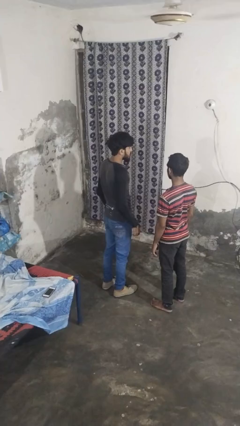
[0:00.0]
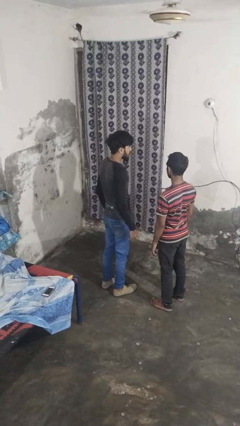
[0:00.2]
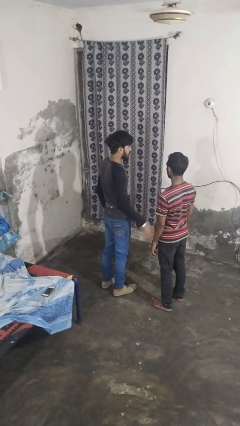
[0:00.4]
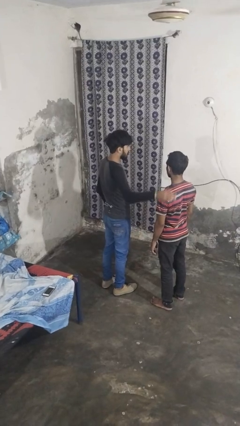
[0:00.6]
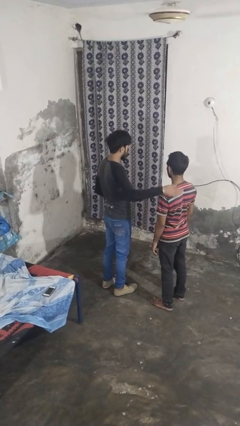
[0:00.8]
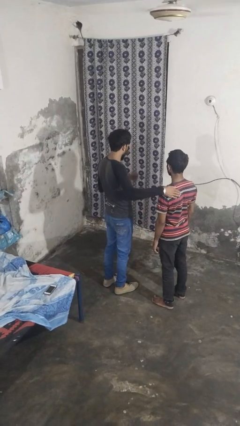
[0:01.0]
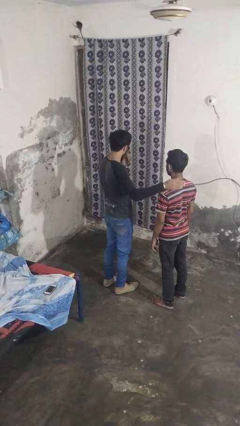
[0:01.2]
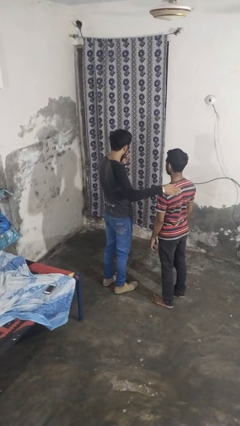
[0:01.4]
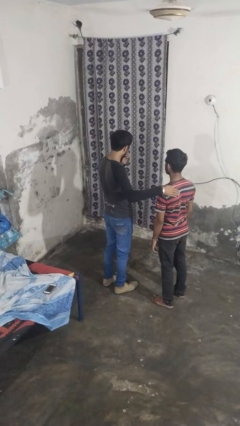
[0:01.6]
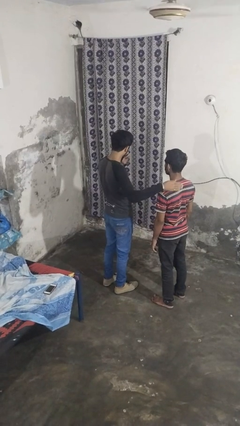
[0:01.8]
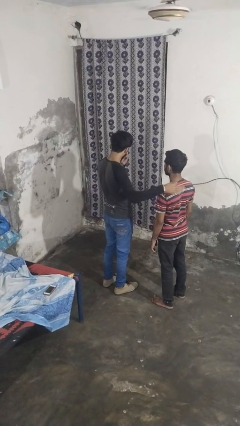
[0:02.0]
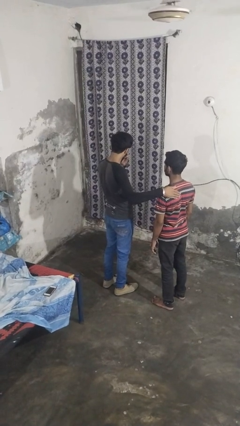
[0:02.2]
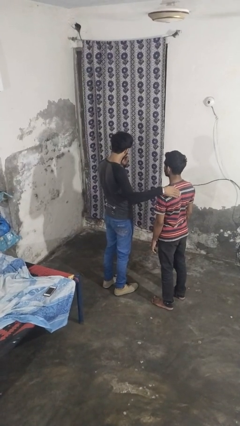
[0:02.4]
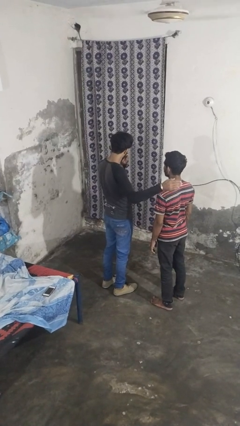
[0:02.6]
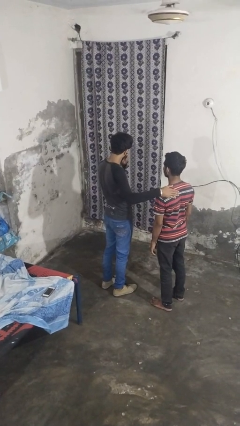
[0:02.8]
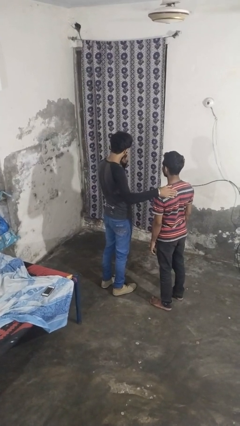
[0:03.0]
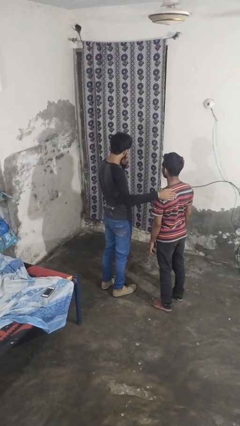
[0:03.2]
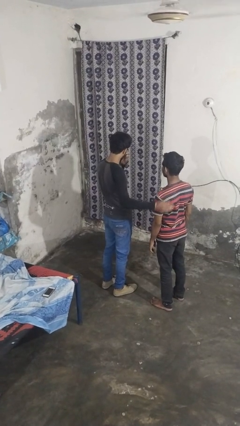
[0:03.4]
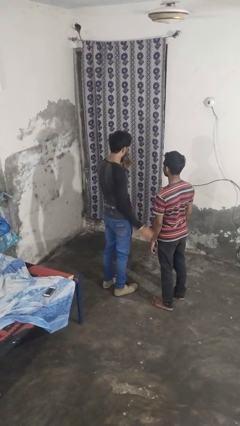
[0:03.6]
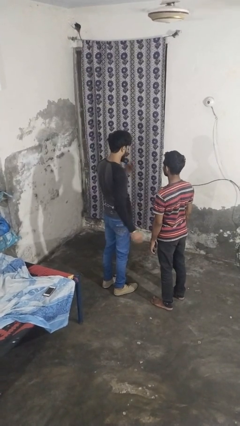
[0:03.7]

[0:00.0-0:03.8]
person pounds shoulders of person

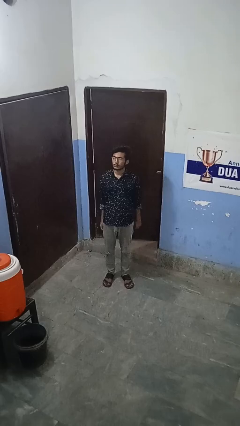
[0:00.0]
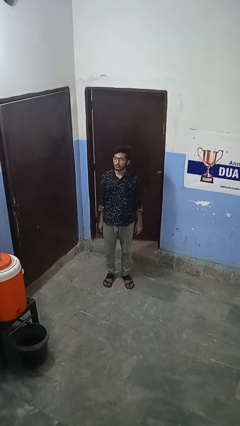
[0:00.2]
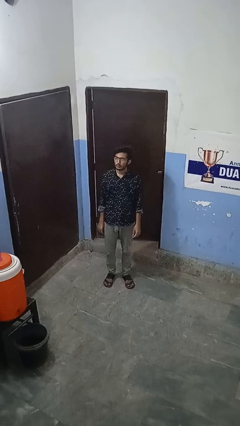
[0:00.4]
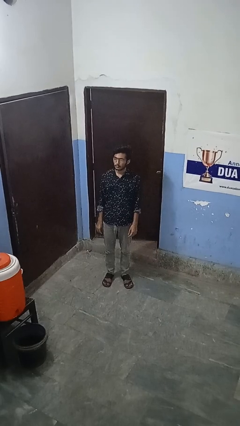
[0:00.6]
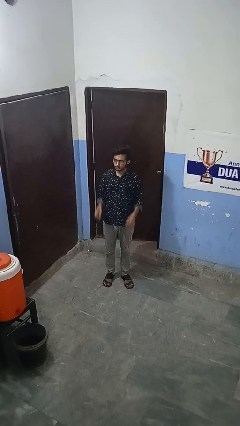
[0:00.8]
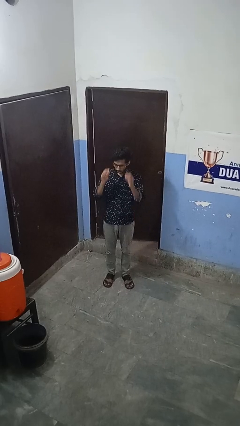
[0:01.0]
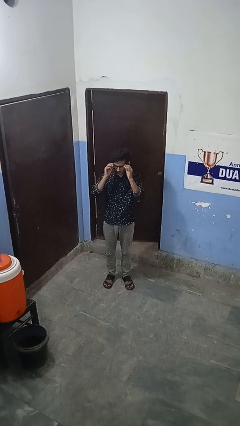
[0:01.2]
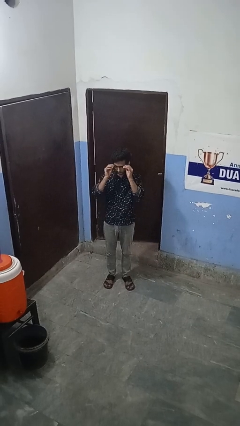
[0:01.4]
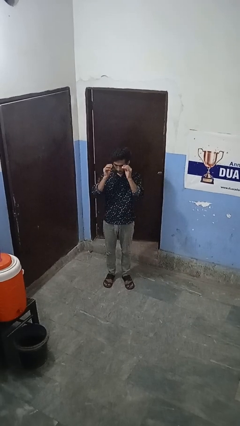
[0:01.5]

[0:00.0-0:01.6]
person takes off glasses

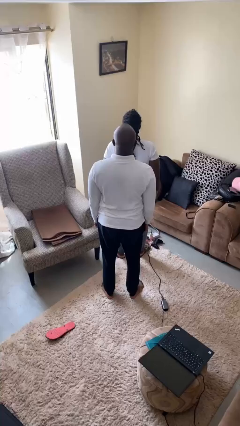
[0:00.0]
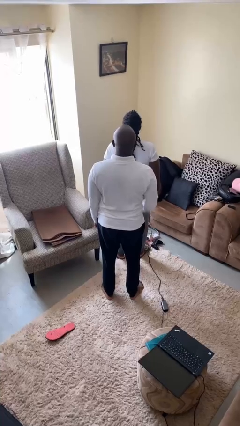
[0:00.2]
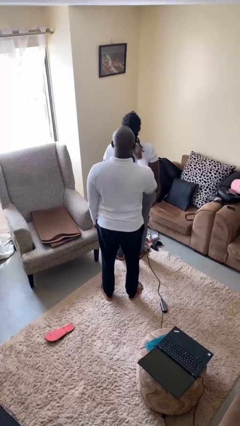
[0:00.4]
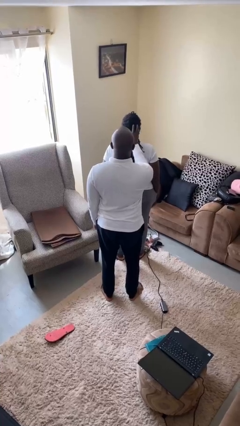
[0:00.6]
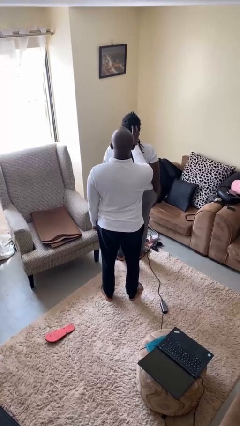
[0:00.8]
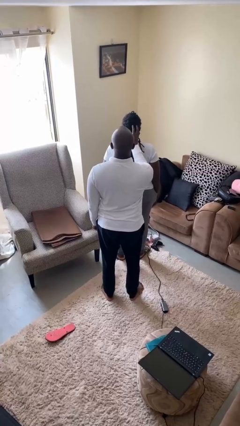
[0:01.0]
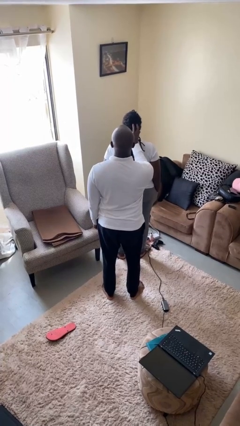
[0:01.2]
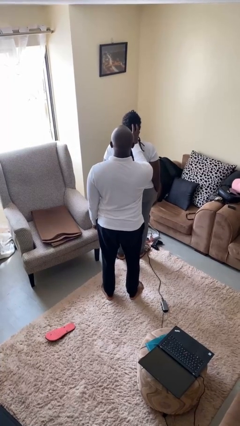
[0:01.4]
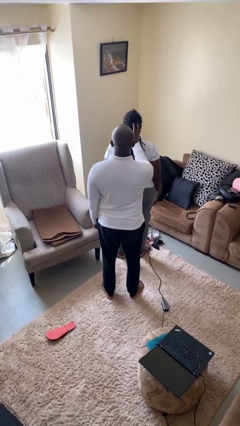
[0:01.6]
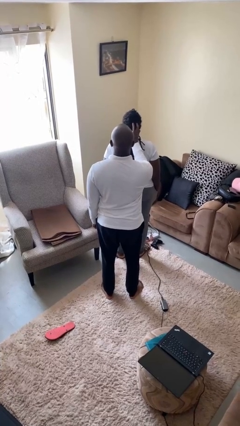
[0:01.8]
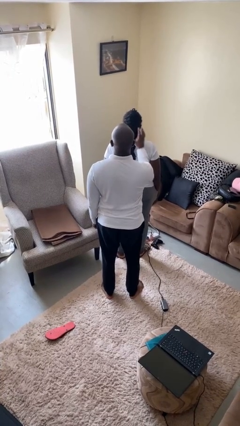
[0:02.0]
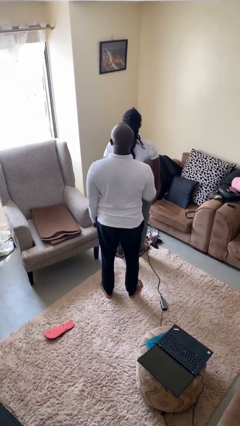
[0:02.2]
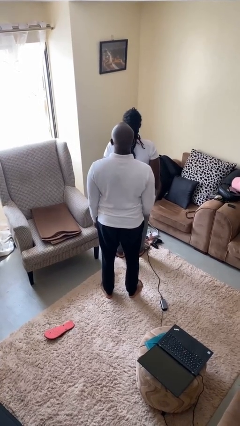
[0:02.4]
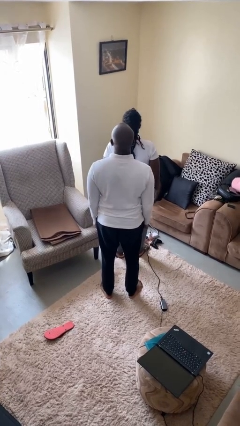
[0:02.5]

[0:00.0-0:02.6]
person grabs person by hair

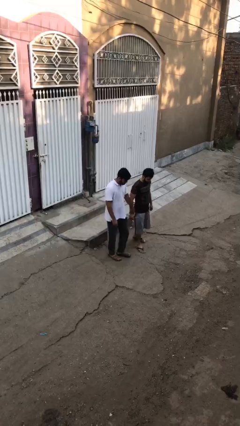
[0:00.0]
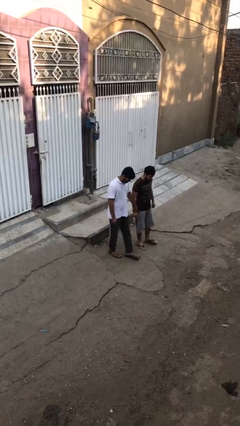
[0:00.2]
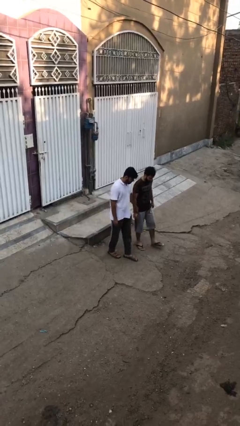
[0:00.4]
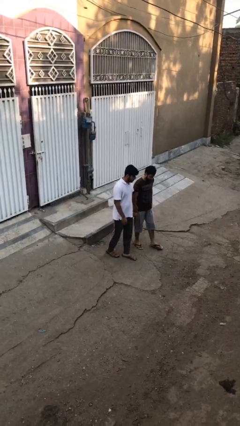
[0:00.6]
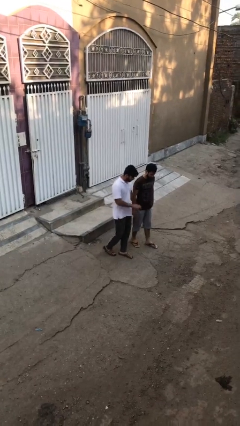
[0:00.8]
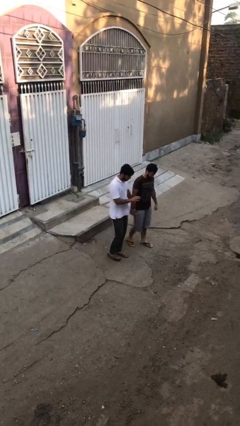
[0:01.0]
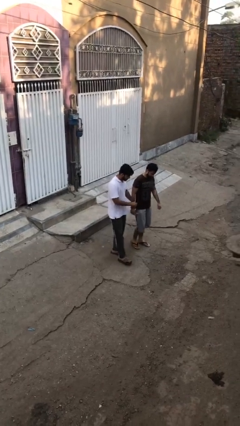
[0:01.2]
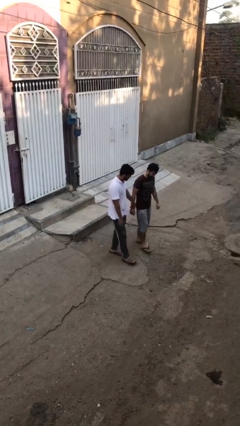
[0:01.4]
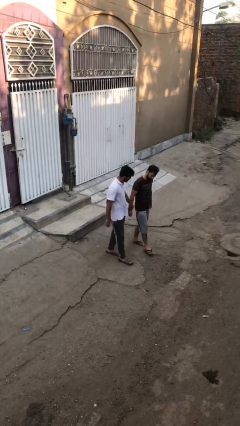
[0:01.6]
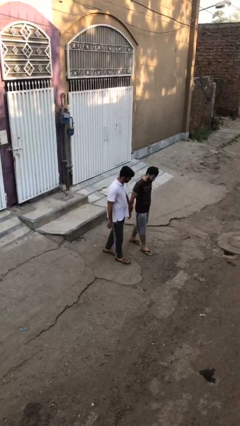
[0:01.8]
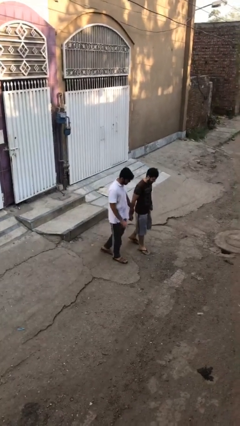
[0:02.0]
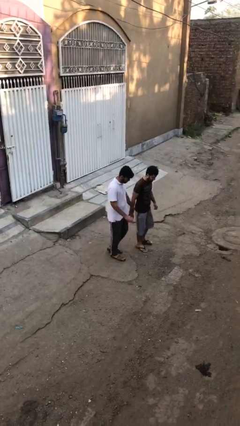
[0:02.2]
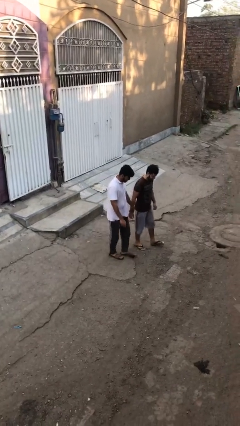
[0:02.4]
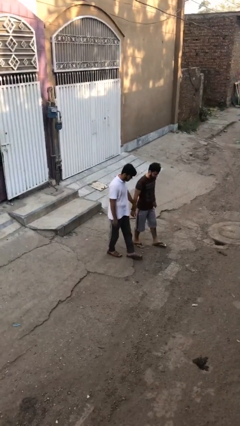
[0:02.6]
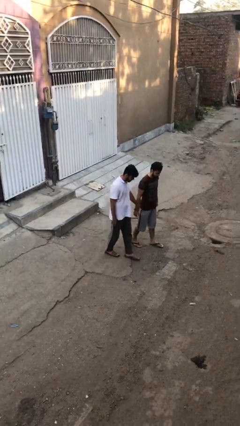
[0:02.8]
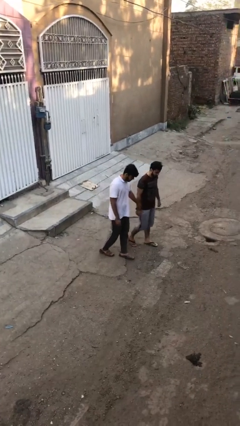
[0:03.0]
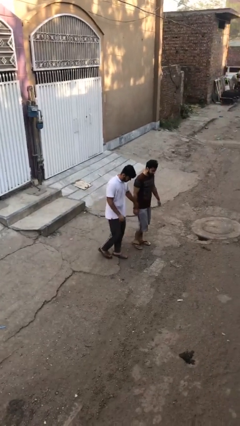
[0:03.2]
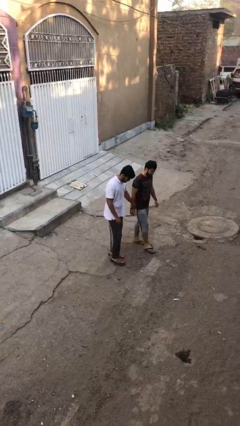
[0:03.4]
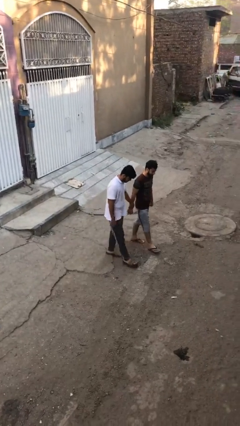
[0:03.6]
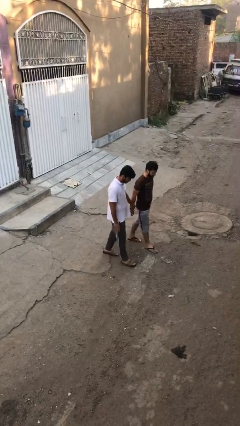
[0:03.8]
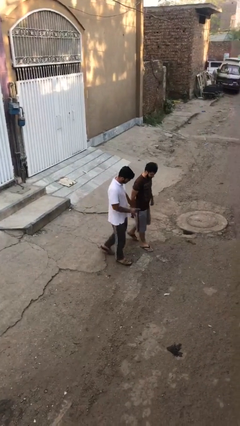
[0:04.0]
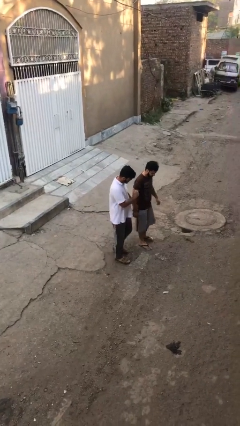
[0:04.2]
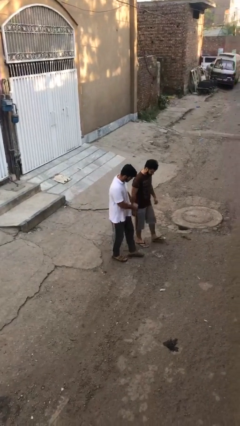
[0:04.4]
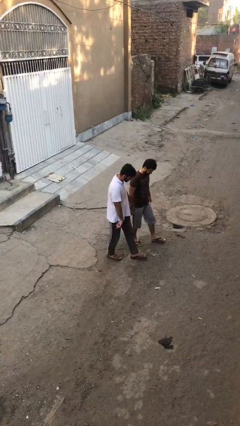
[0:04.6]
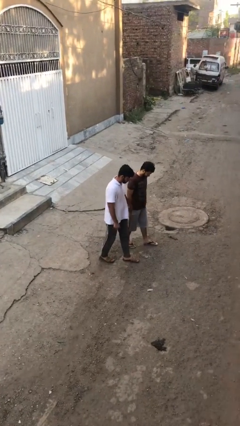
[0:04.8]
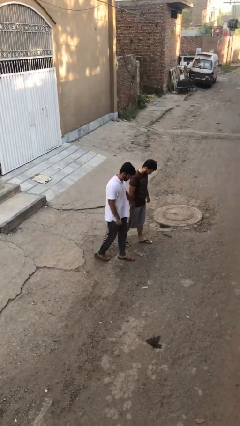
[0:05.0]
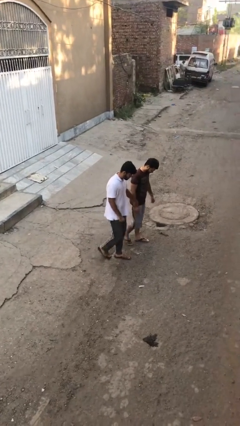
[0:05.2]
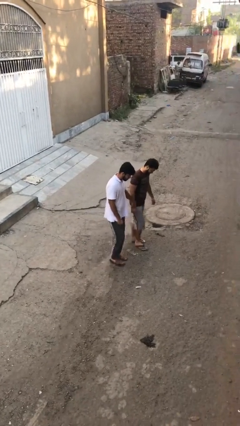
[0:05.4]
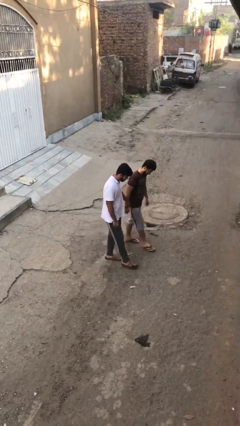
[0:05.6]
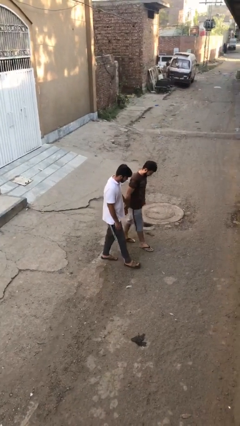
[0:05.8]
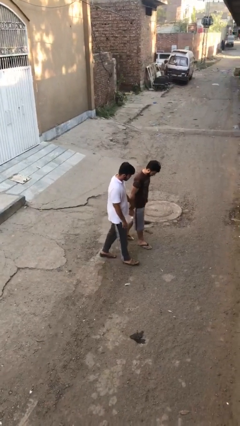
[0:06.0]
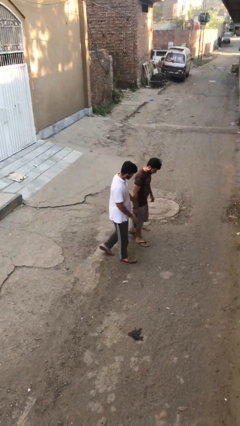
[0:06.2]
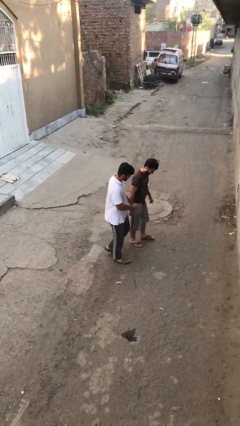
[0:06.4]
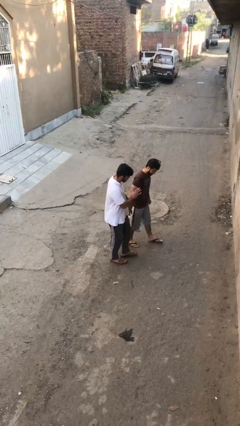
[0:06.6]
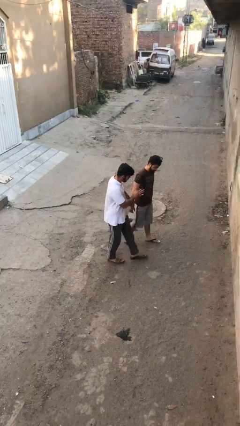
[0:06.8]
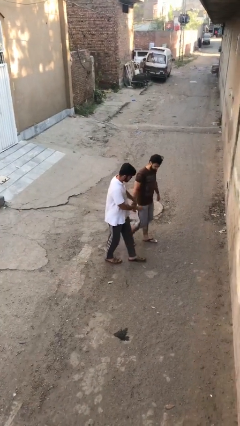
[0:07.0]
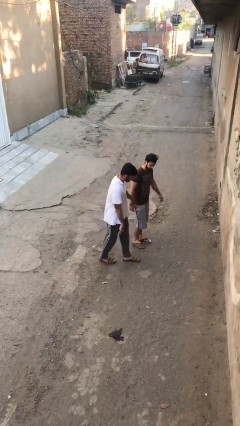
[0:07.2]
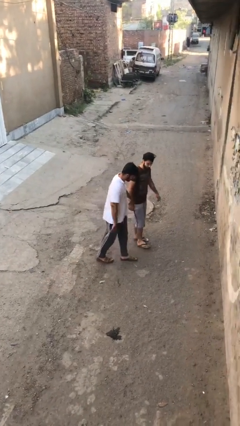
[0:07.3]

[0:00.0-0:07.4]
person holds hand

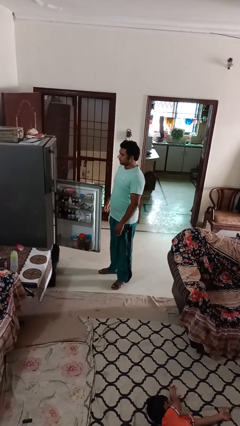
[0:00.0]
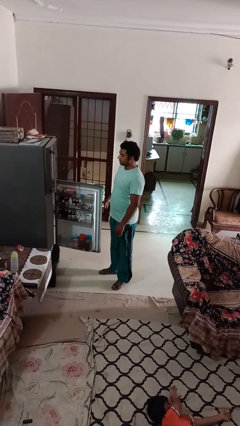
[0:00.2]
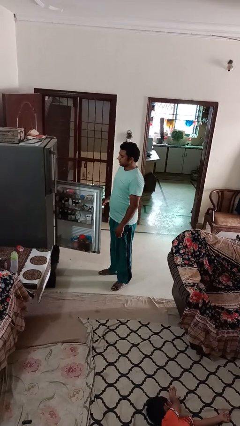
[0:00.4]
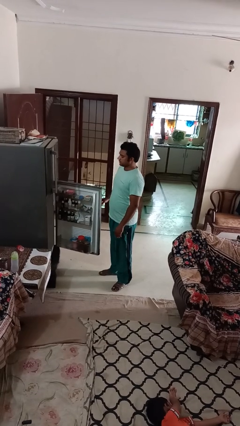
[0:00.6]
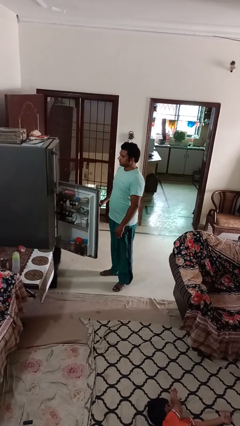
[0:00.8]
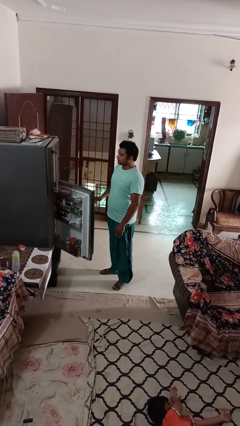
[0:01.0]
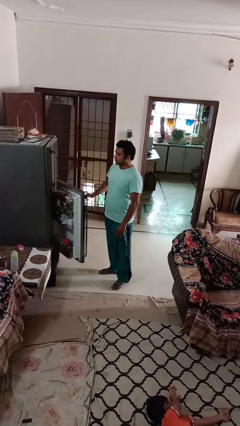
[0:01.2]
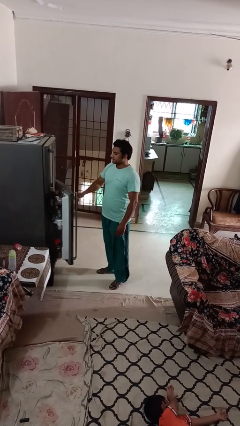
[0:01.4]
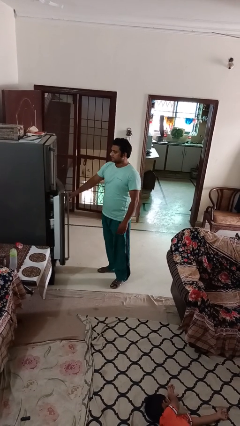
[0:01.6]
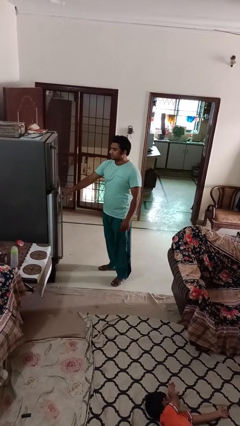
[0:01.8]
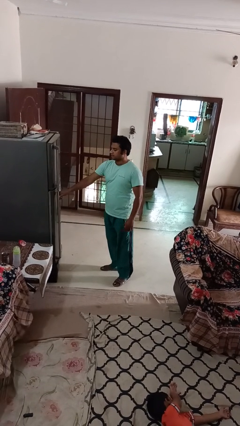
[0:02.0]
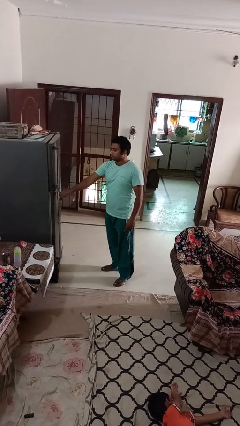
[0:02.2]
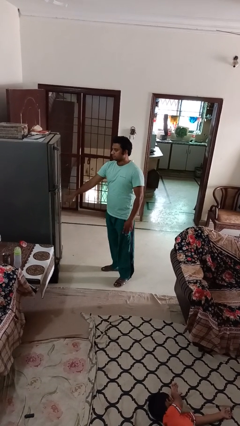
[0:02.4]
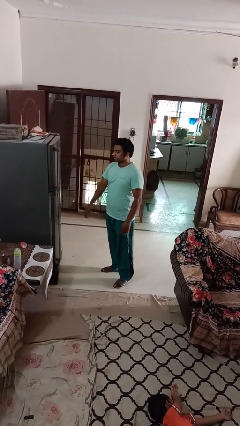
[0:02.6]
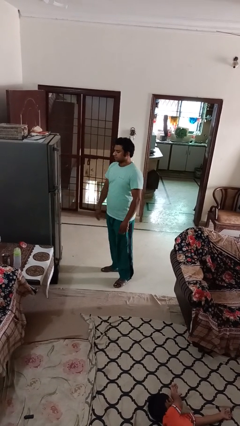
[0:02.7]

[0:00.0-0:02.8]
person closes refrigerator
